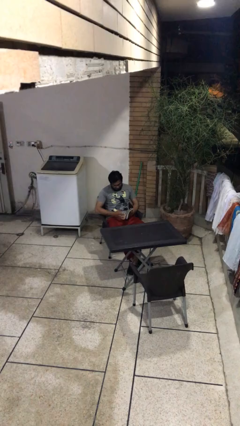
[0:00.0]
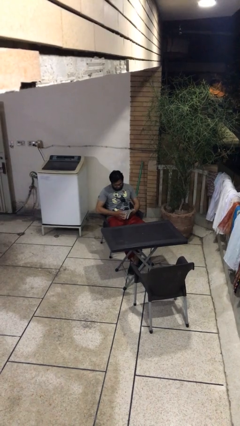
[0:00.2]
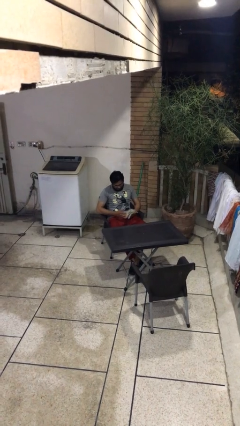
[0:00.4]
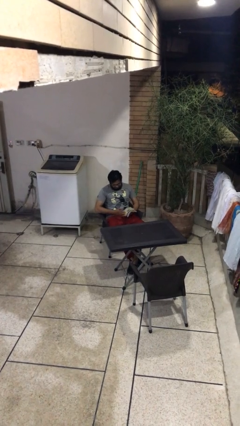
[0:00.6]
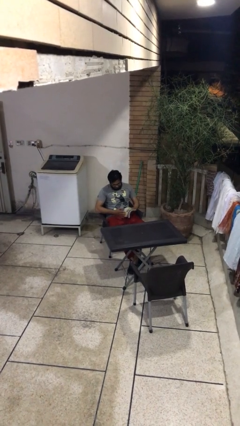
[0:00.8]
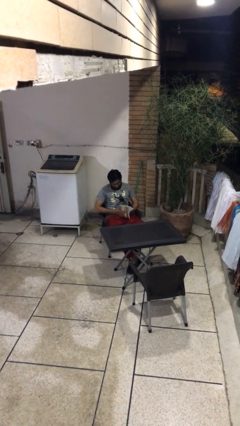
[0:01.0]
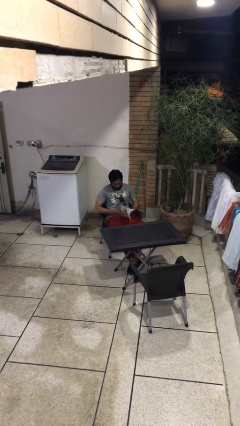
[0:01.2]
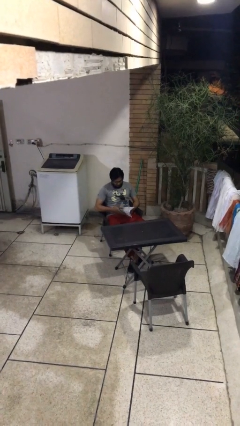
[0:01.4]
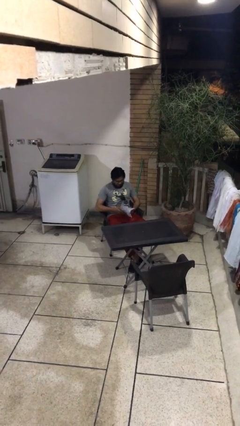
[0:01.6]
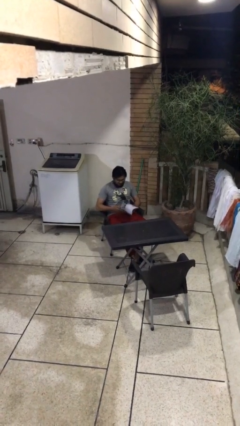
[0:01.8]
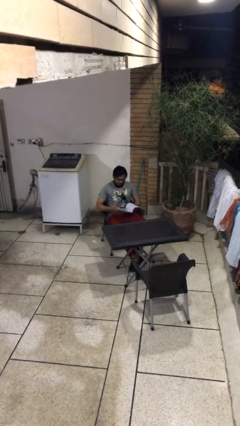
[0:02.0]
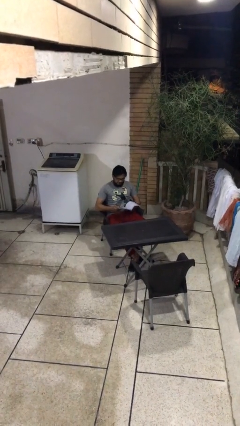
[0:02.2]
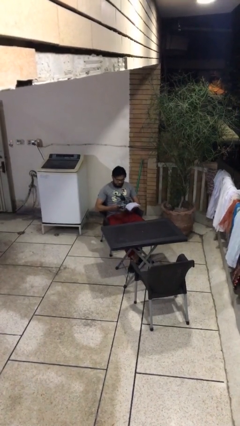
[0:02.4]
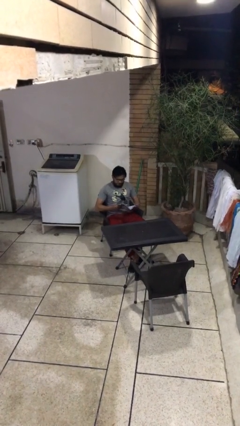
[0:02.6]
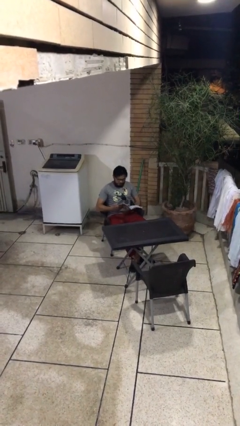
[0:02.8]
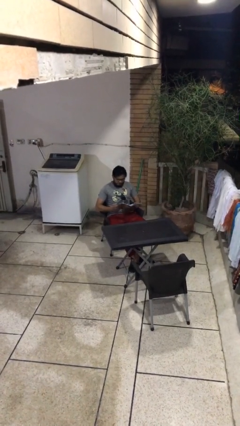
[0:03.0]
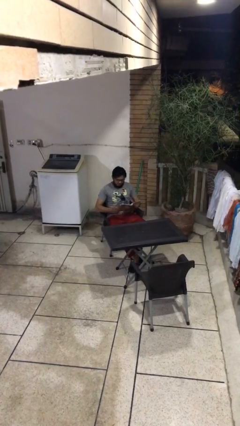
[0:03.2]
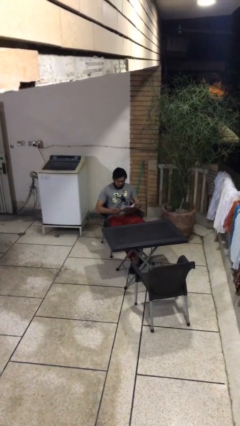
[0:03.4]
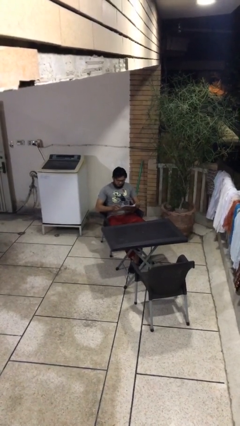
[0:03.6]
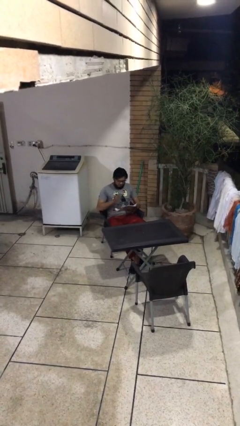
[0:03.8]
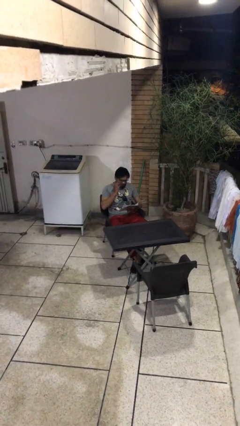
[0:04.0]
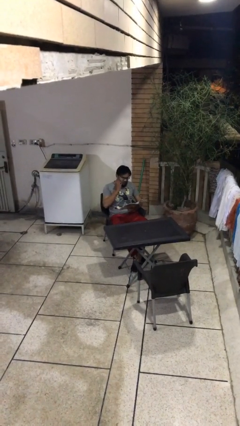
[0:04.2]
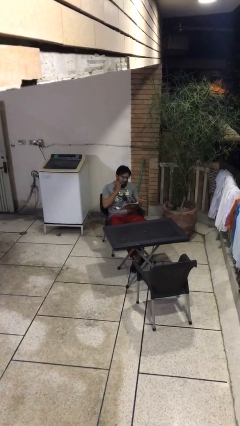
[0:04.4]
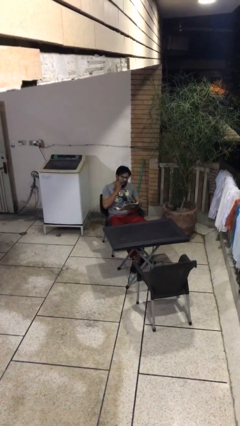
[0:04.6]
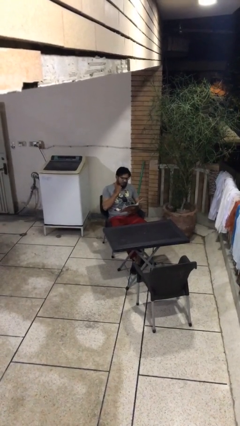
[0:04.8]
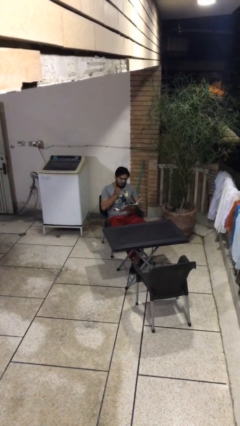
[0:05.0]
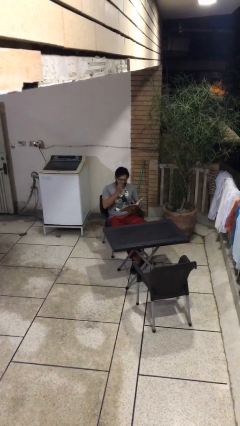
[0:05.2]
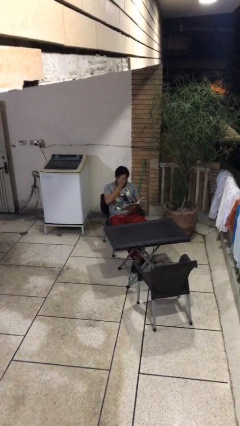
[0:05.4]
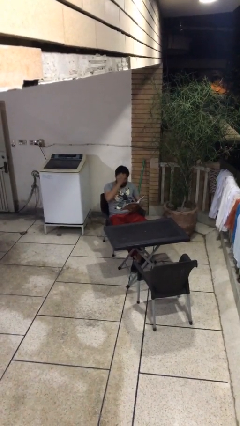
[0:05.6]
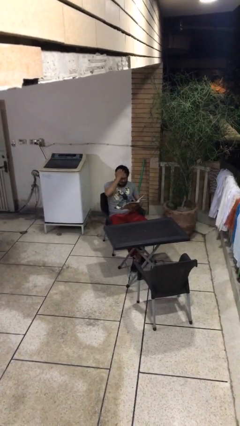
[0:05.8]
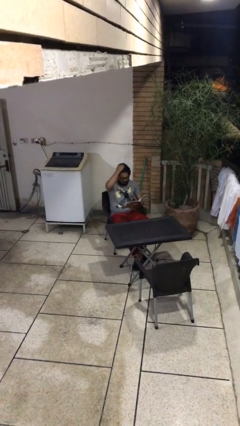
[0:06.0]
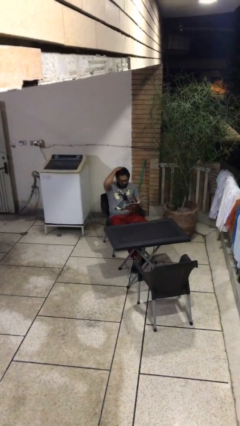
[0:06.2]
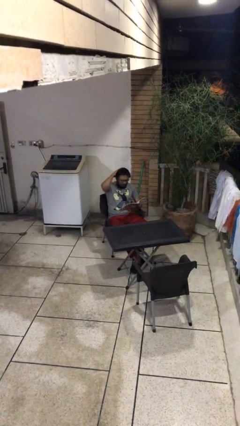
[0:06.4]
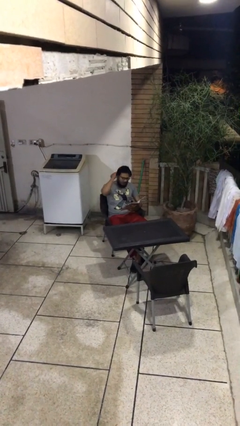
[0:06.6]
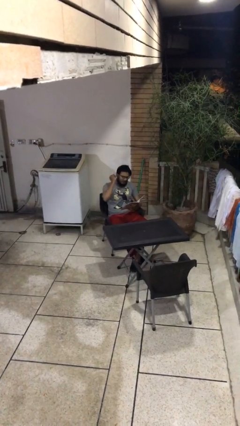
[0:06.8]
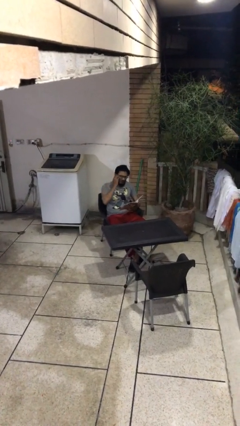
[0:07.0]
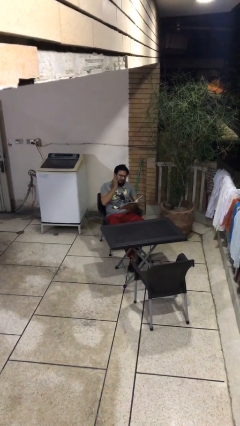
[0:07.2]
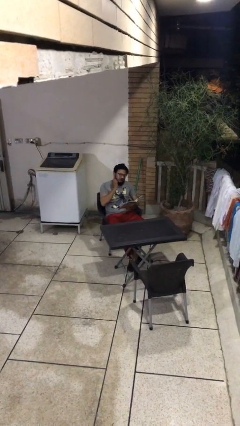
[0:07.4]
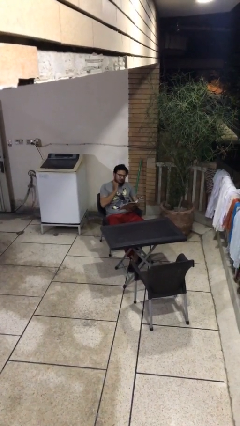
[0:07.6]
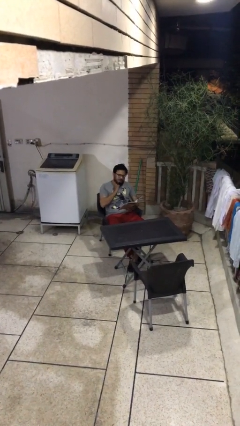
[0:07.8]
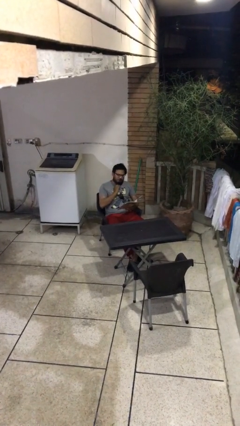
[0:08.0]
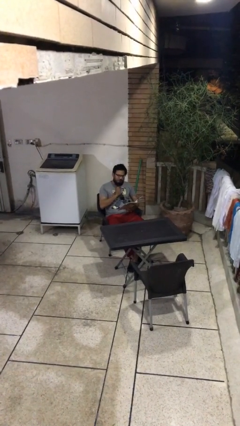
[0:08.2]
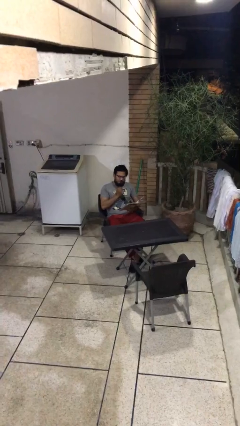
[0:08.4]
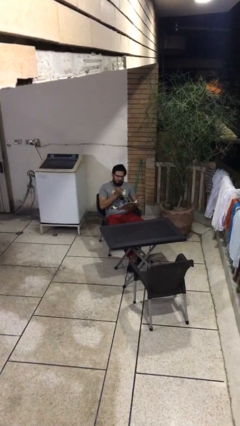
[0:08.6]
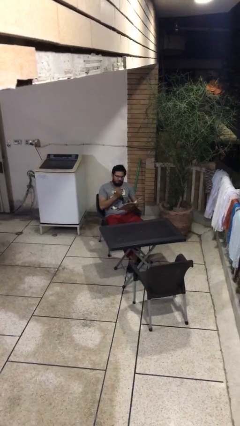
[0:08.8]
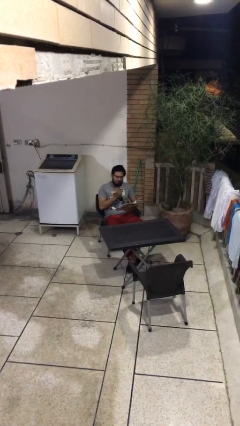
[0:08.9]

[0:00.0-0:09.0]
person reads document

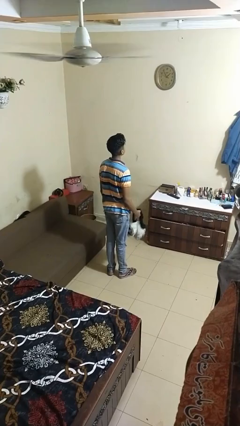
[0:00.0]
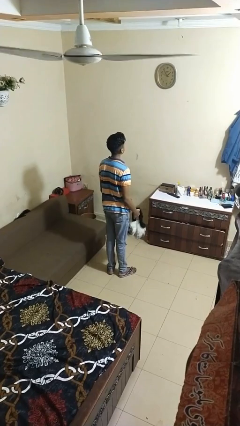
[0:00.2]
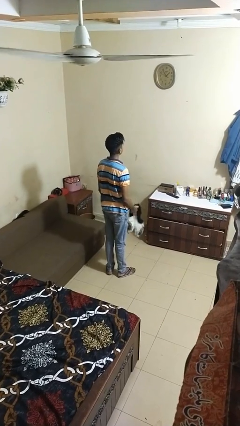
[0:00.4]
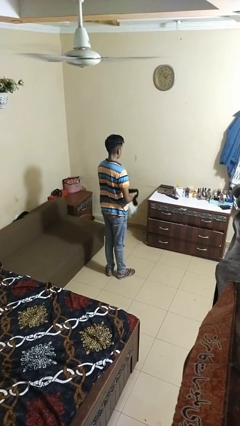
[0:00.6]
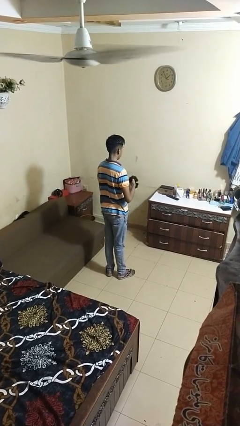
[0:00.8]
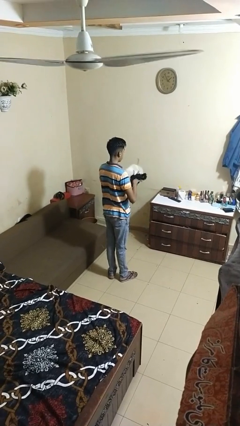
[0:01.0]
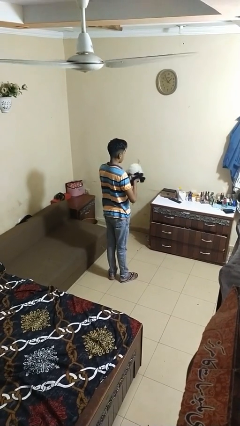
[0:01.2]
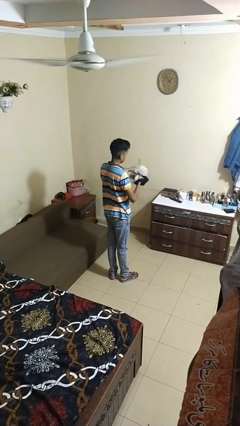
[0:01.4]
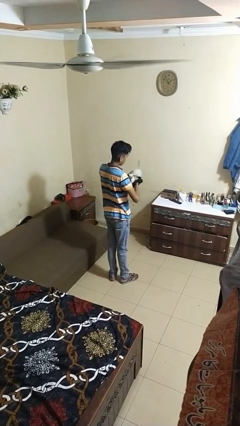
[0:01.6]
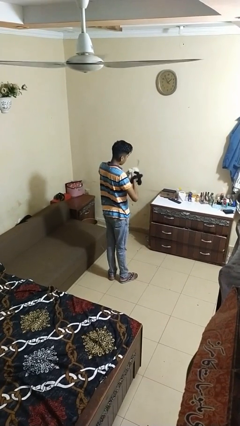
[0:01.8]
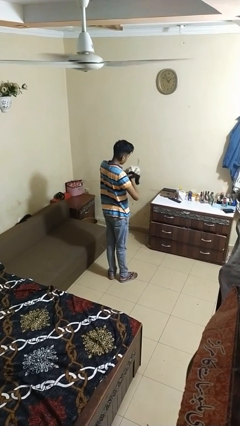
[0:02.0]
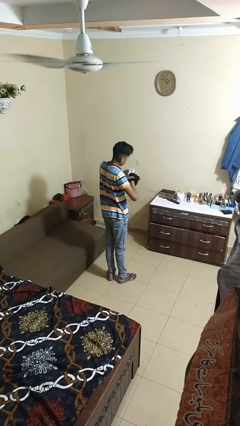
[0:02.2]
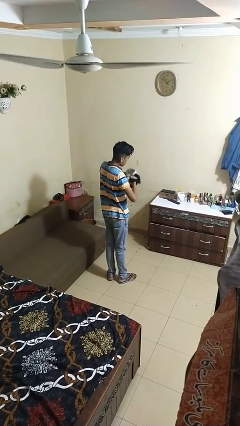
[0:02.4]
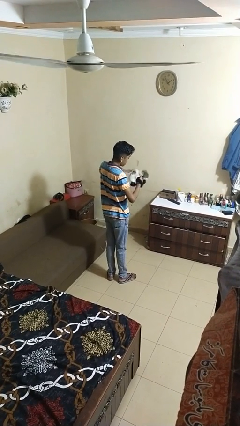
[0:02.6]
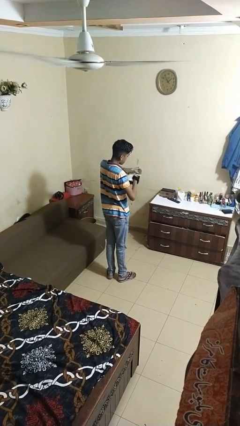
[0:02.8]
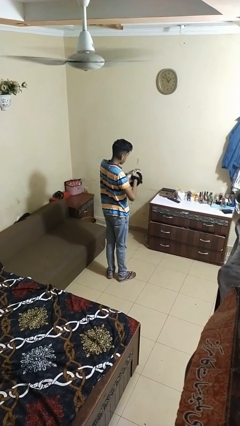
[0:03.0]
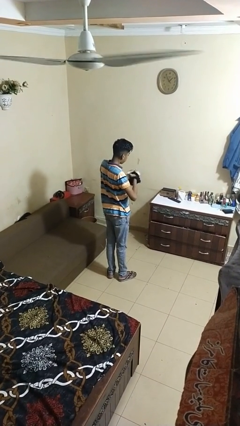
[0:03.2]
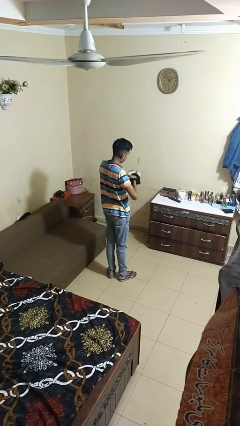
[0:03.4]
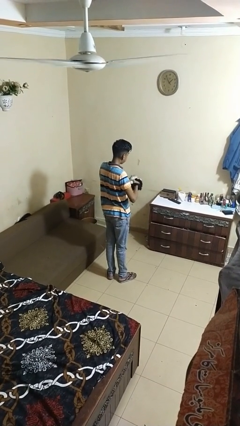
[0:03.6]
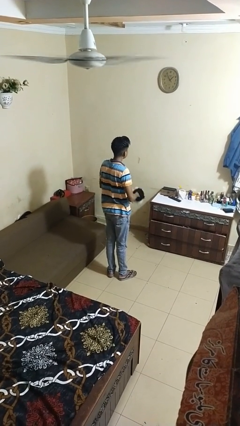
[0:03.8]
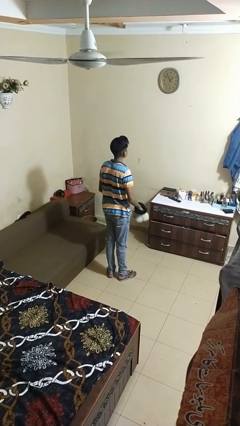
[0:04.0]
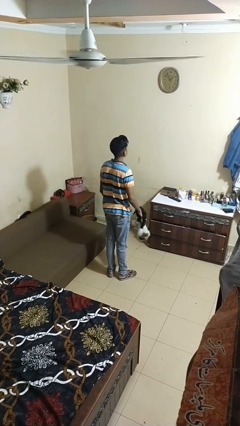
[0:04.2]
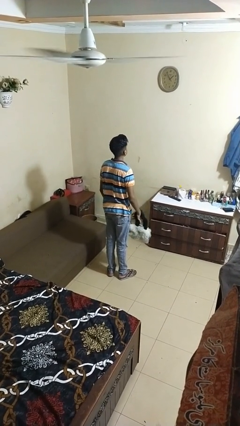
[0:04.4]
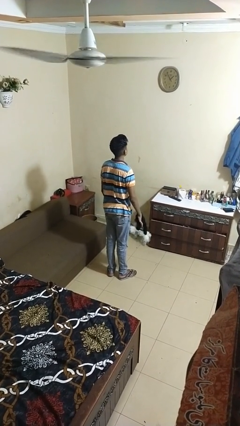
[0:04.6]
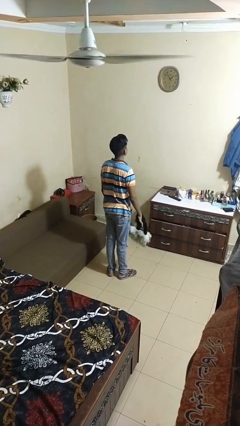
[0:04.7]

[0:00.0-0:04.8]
person squeezes object

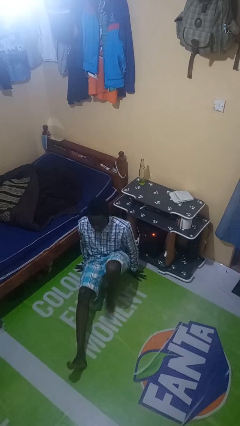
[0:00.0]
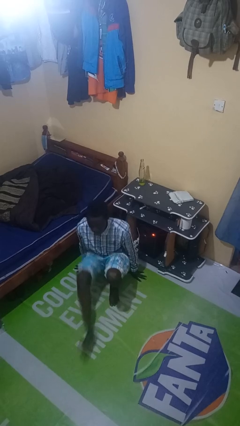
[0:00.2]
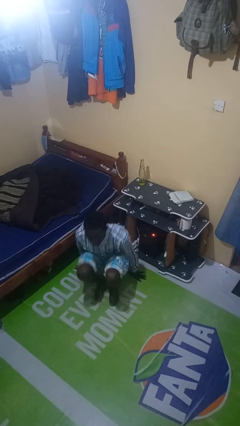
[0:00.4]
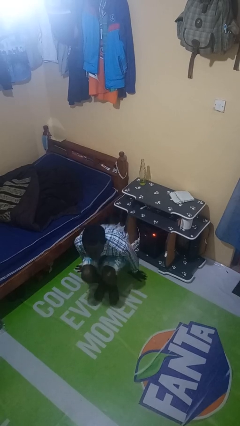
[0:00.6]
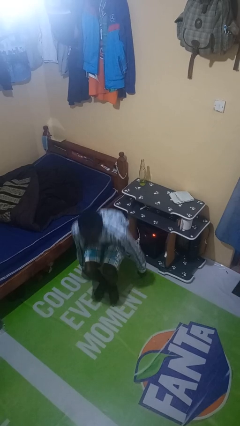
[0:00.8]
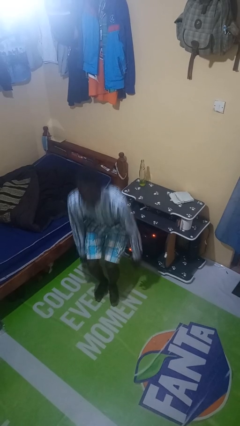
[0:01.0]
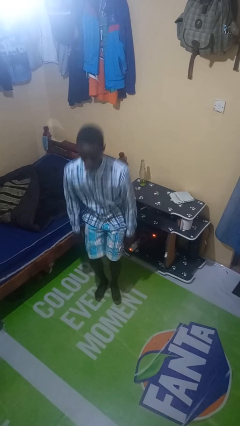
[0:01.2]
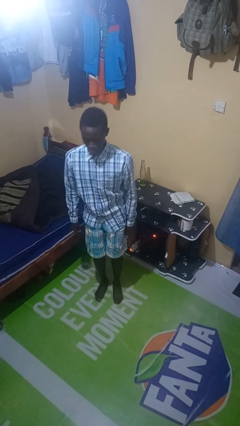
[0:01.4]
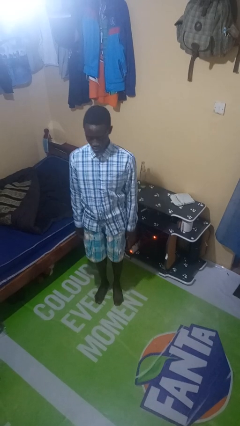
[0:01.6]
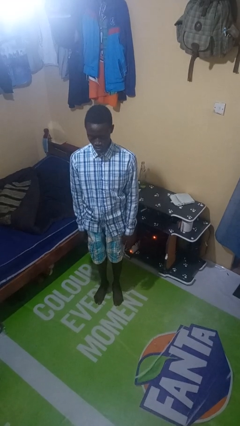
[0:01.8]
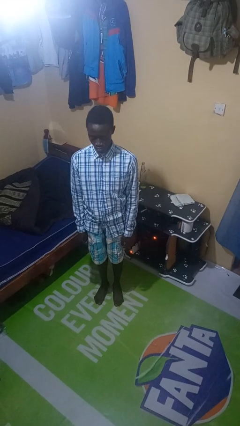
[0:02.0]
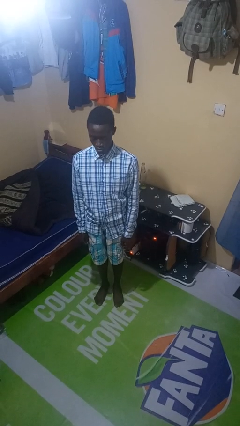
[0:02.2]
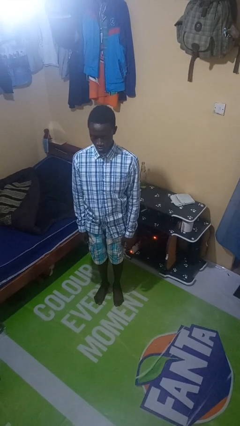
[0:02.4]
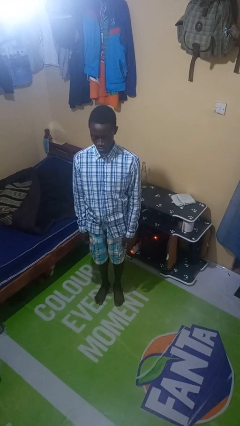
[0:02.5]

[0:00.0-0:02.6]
person stands up from floor

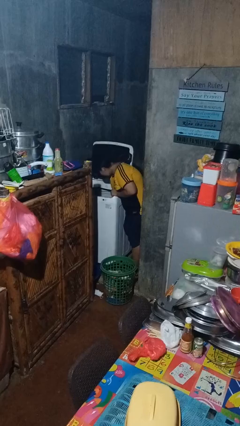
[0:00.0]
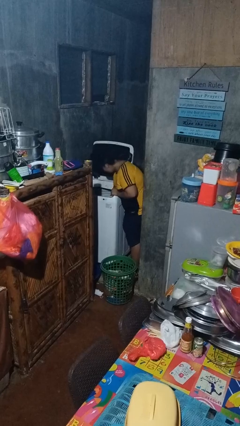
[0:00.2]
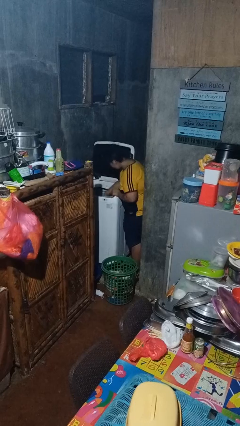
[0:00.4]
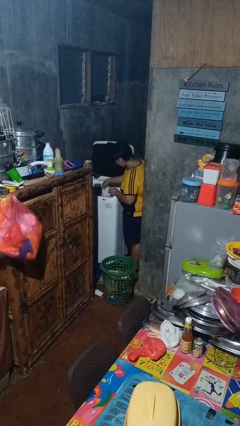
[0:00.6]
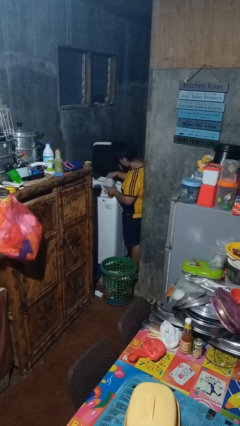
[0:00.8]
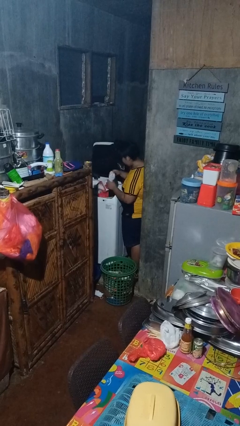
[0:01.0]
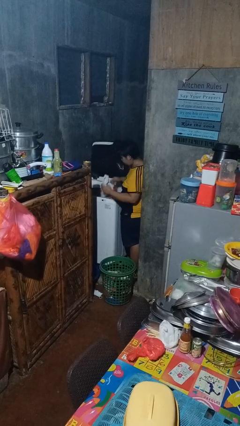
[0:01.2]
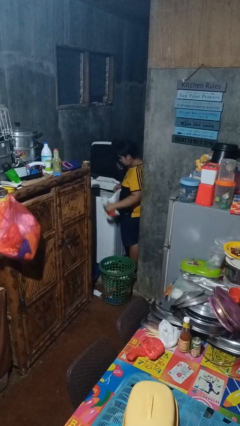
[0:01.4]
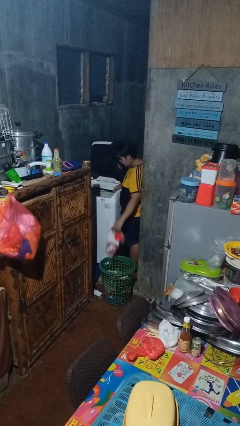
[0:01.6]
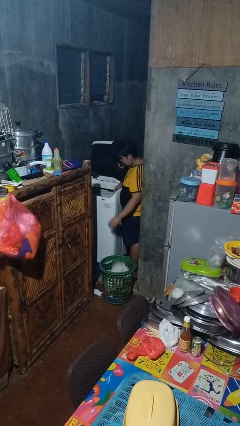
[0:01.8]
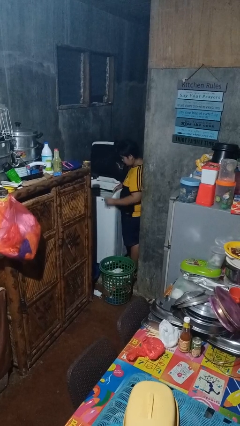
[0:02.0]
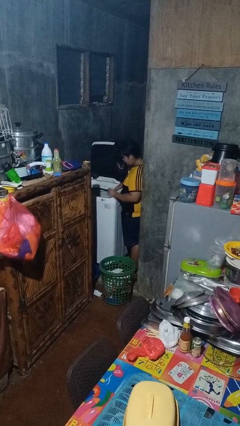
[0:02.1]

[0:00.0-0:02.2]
person unloads clotheswasher
